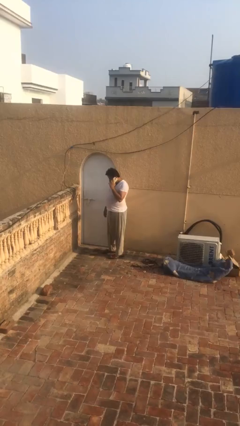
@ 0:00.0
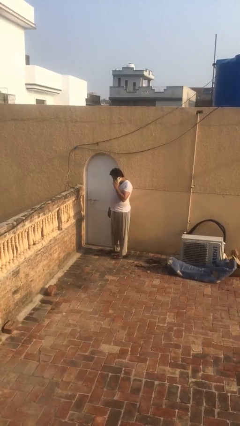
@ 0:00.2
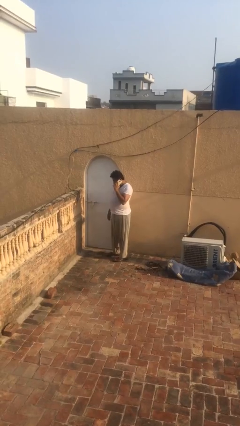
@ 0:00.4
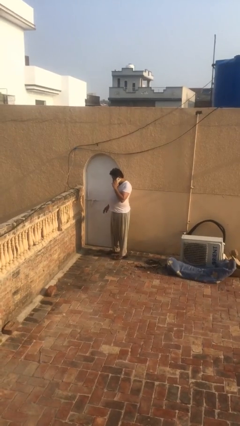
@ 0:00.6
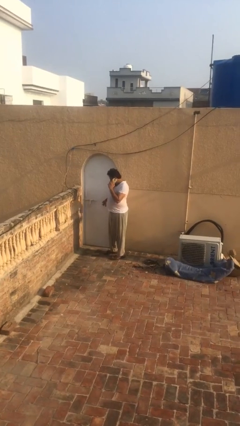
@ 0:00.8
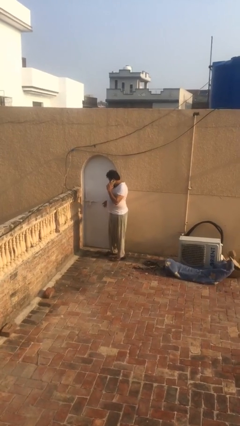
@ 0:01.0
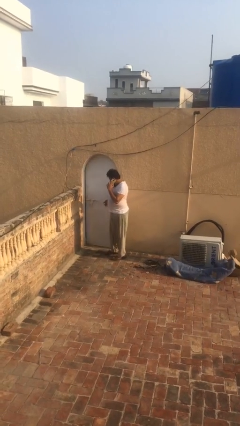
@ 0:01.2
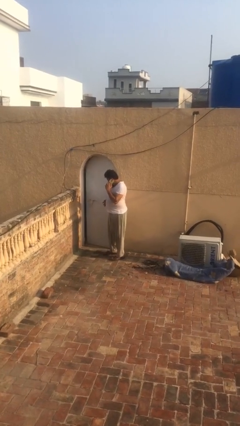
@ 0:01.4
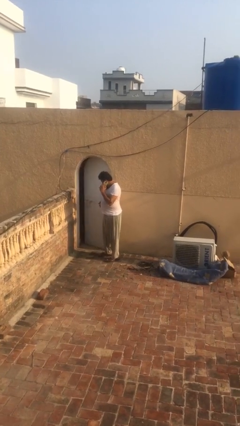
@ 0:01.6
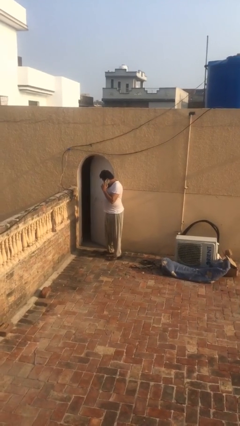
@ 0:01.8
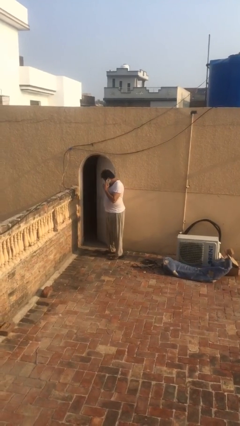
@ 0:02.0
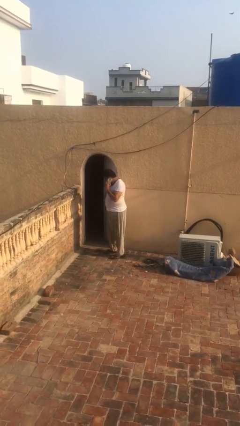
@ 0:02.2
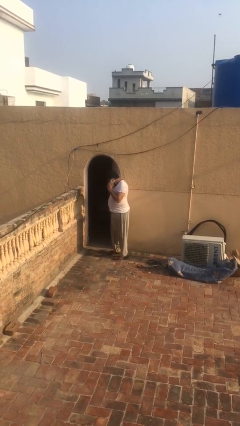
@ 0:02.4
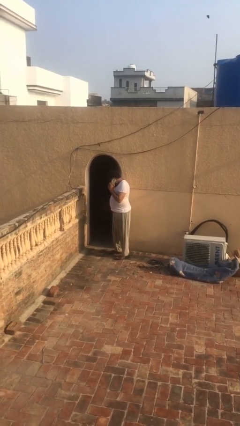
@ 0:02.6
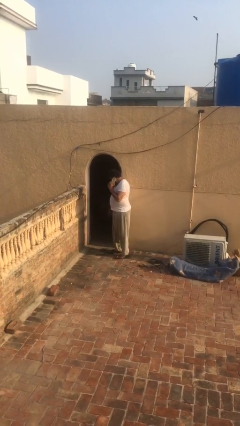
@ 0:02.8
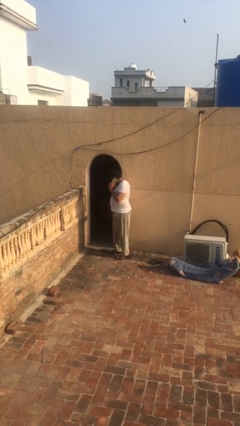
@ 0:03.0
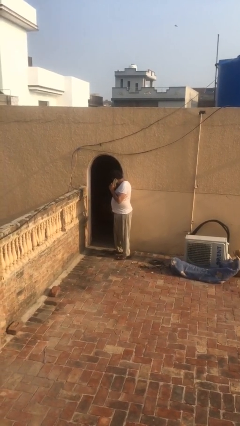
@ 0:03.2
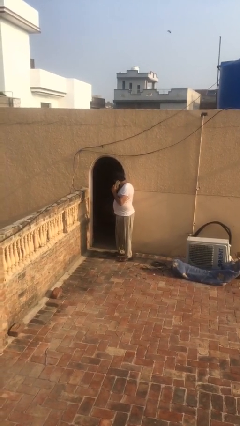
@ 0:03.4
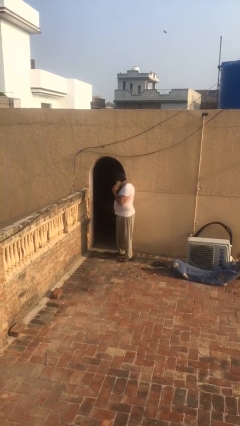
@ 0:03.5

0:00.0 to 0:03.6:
person opens facility door

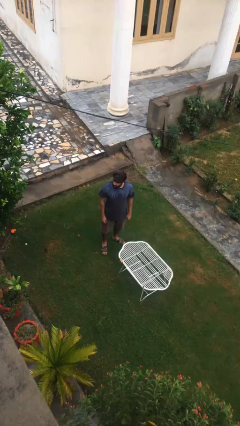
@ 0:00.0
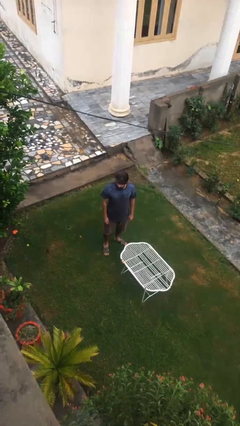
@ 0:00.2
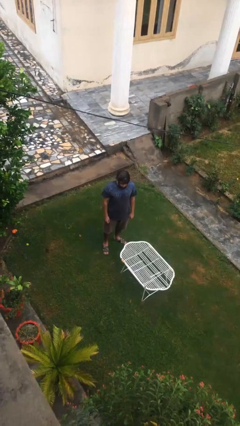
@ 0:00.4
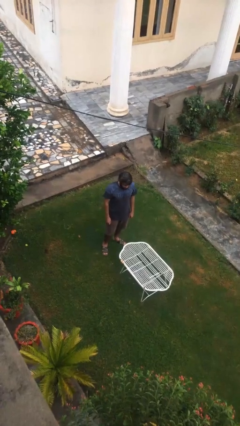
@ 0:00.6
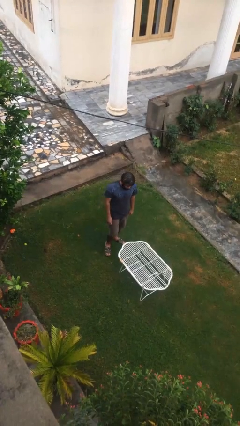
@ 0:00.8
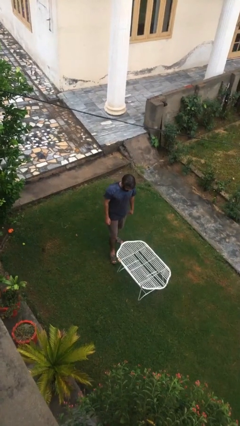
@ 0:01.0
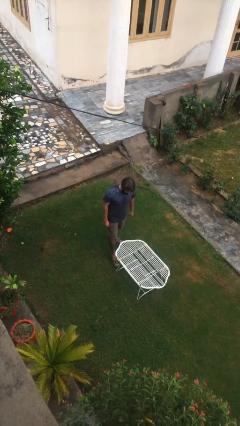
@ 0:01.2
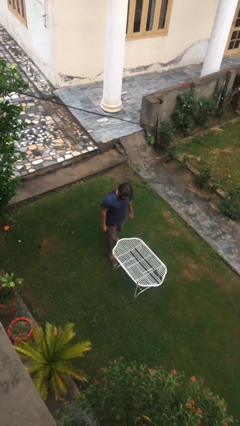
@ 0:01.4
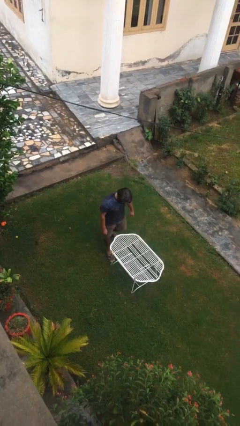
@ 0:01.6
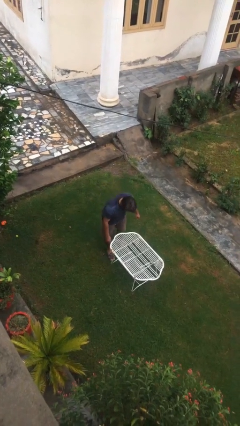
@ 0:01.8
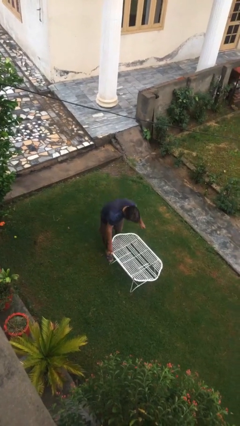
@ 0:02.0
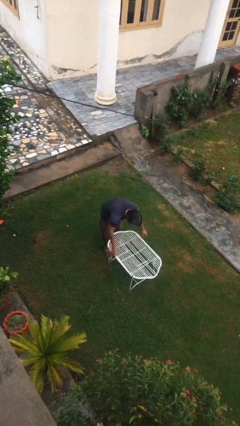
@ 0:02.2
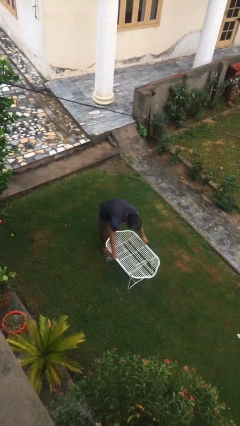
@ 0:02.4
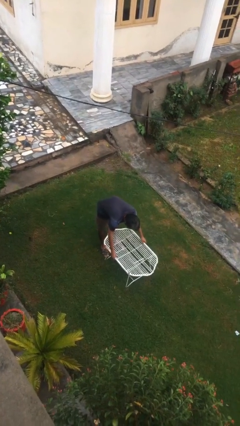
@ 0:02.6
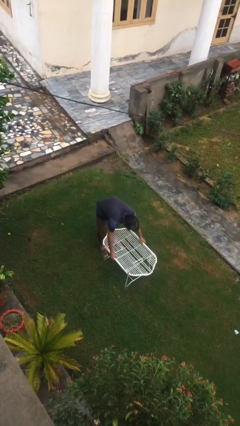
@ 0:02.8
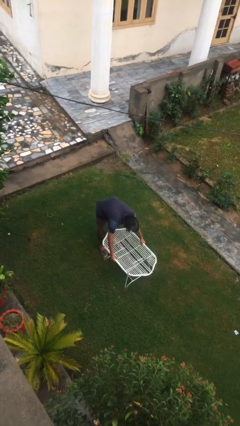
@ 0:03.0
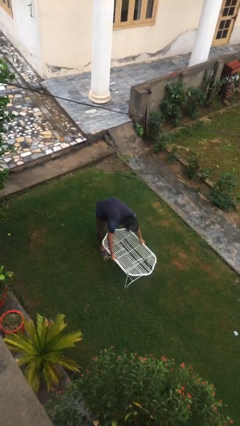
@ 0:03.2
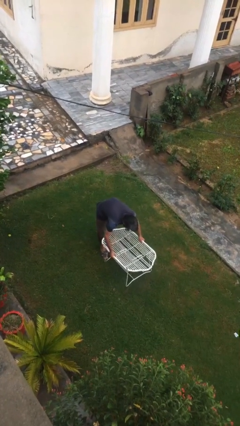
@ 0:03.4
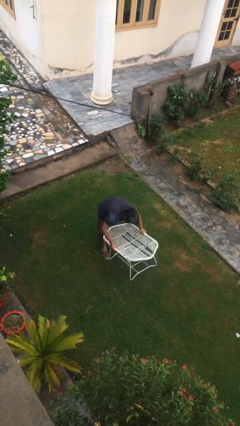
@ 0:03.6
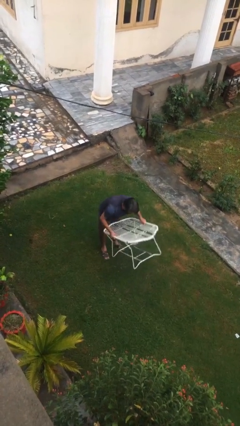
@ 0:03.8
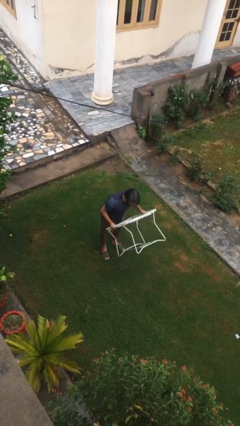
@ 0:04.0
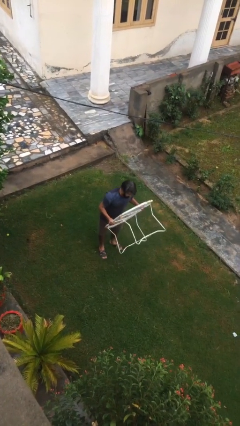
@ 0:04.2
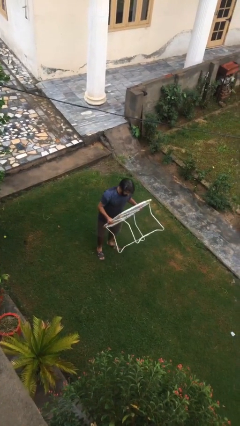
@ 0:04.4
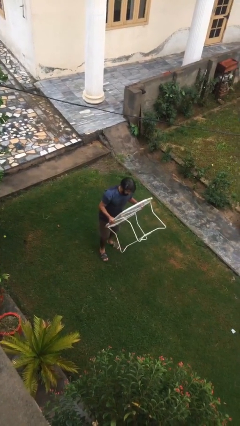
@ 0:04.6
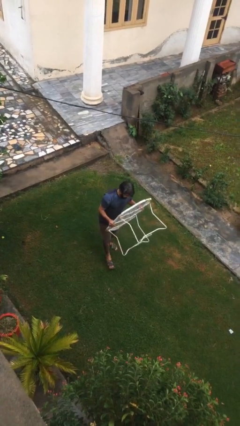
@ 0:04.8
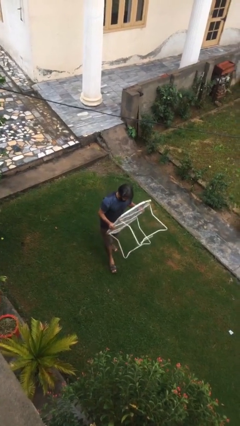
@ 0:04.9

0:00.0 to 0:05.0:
person picks up object from floor

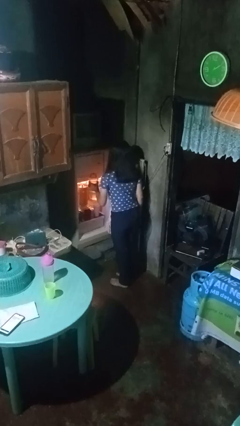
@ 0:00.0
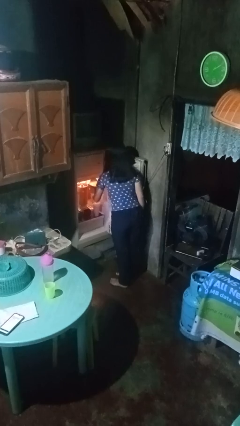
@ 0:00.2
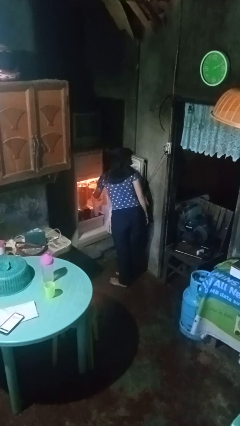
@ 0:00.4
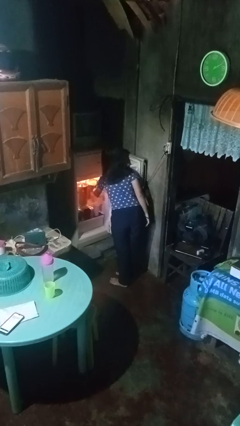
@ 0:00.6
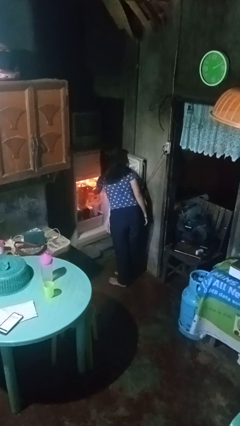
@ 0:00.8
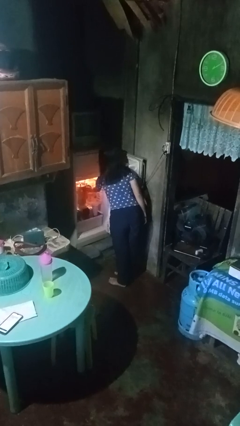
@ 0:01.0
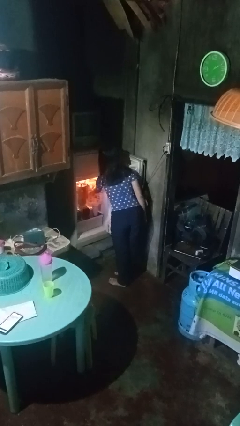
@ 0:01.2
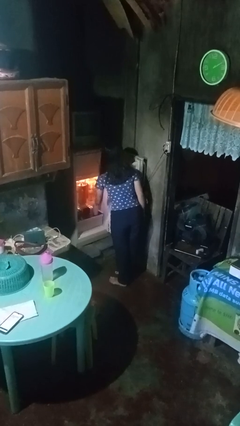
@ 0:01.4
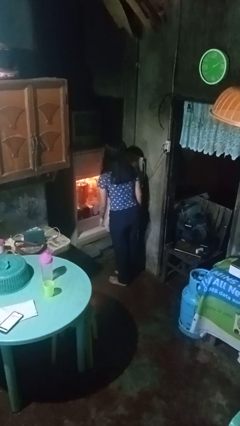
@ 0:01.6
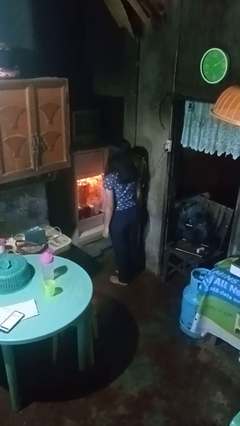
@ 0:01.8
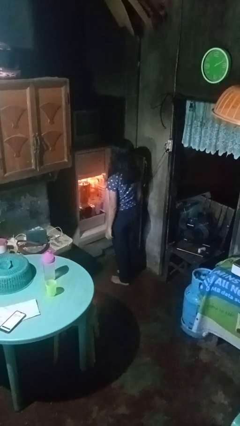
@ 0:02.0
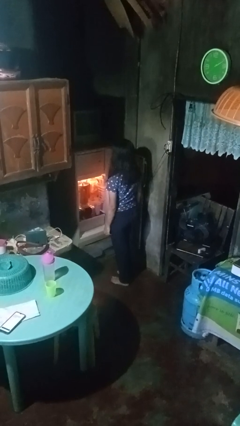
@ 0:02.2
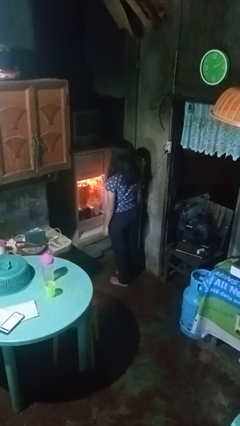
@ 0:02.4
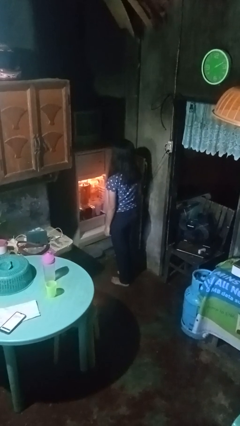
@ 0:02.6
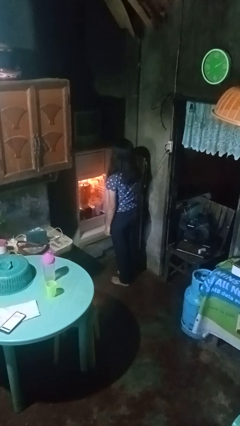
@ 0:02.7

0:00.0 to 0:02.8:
person puts object into refrigerator

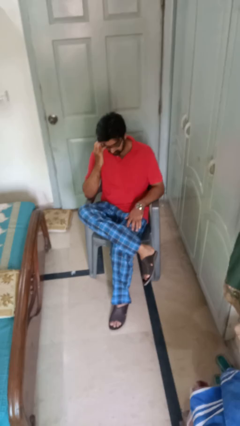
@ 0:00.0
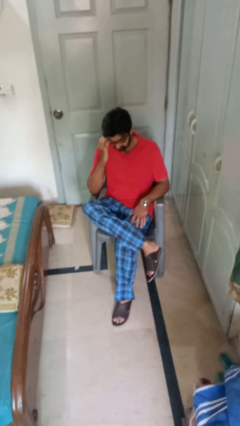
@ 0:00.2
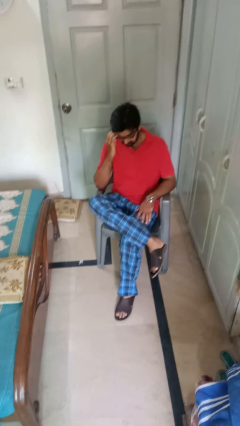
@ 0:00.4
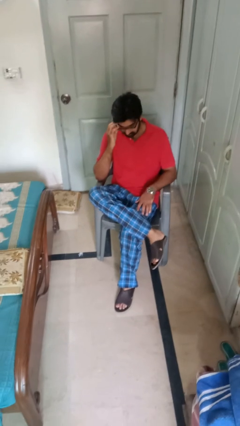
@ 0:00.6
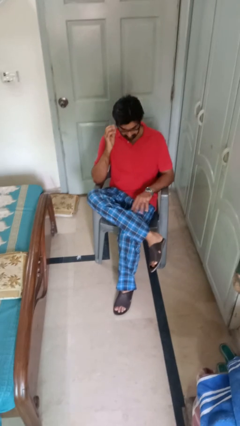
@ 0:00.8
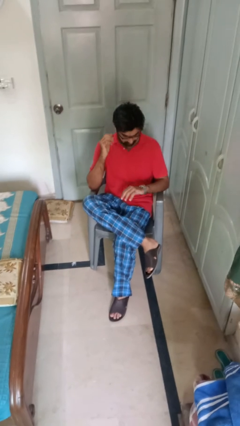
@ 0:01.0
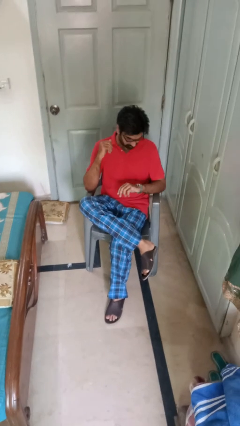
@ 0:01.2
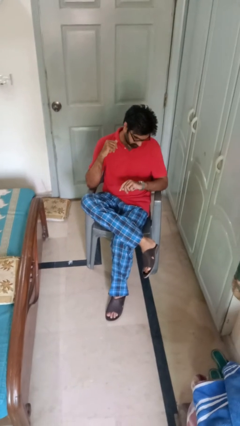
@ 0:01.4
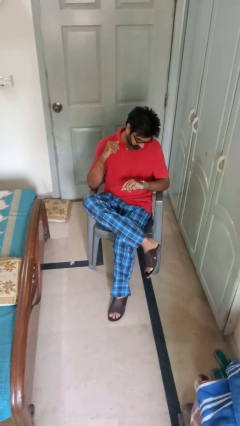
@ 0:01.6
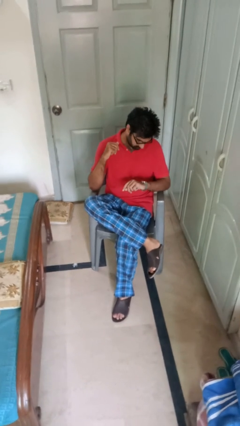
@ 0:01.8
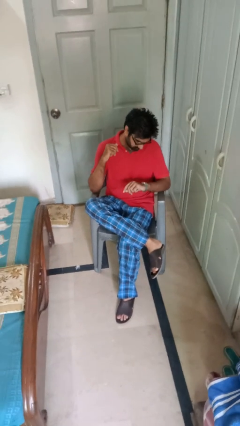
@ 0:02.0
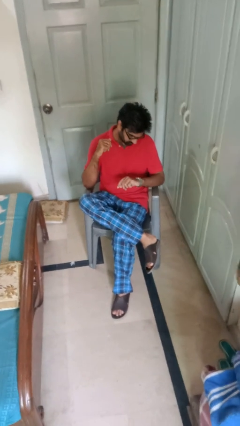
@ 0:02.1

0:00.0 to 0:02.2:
person looks at wristwatch

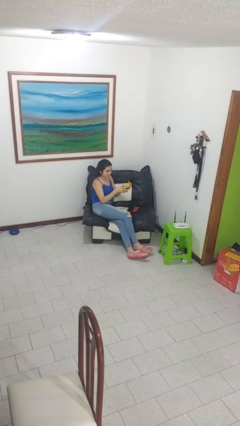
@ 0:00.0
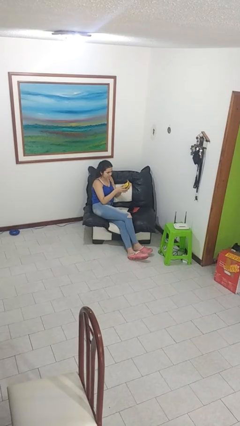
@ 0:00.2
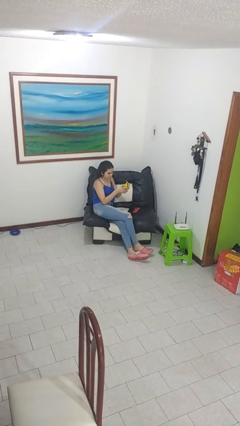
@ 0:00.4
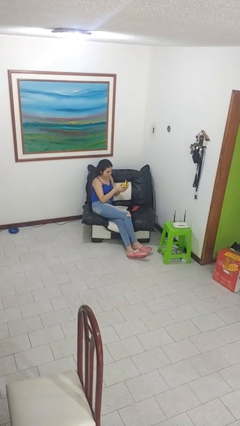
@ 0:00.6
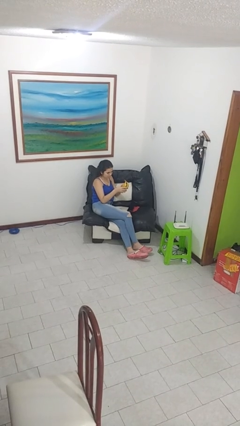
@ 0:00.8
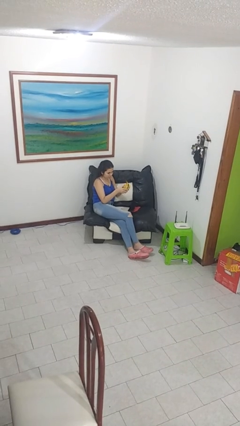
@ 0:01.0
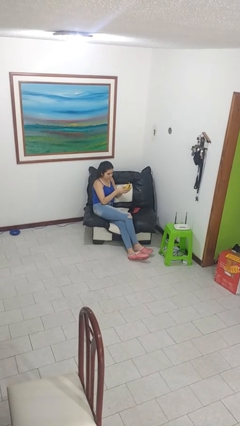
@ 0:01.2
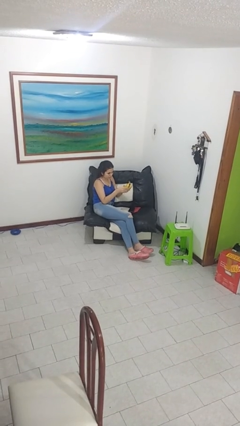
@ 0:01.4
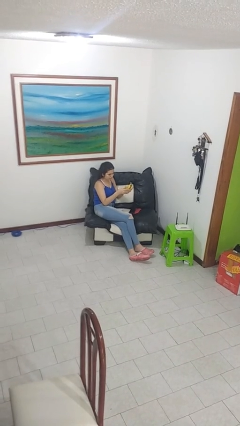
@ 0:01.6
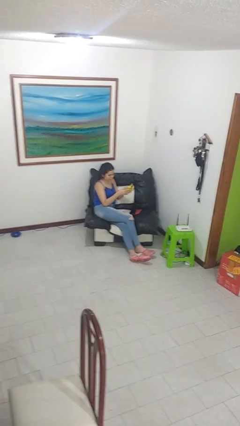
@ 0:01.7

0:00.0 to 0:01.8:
person taps object with finger

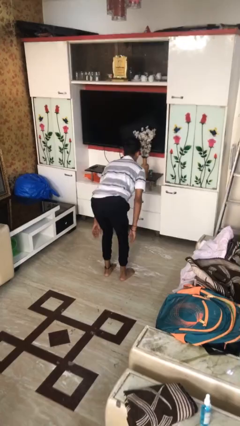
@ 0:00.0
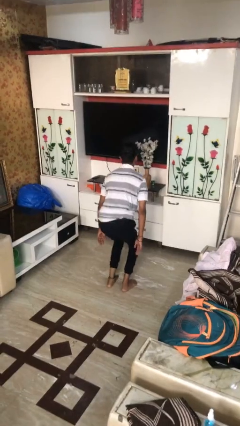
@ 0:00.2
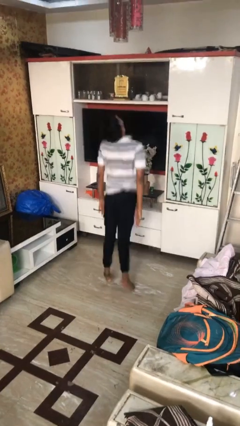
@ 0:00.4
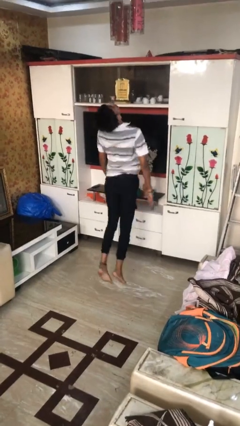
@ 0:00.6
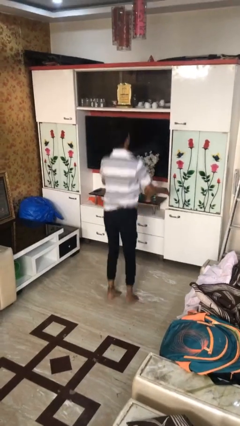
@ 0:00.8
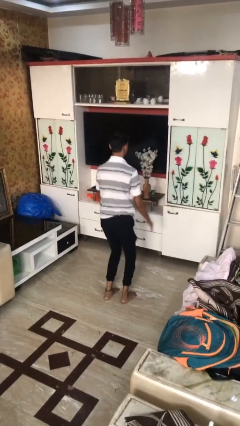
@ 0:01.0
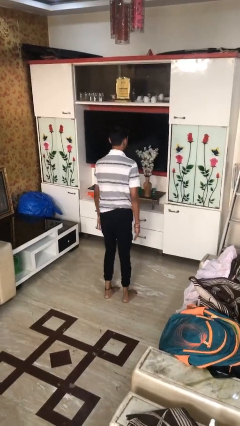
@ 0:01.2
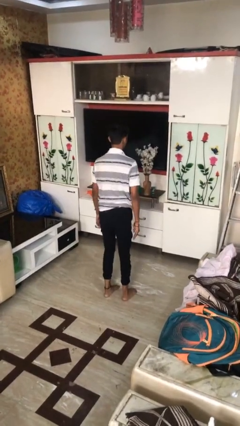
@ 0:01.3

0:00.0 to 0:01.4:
person somersaults

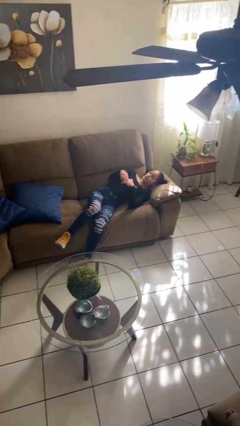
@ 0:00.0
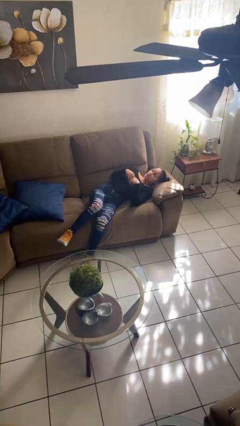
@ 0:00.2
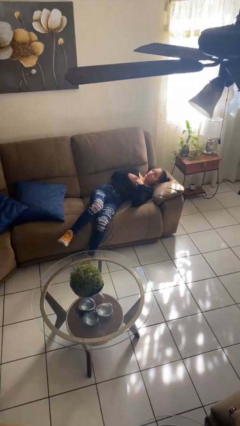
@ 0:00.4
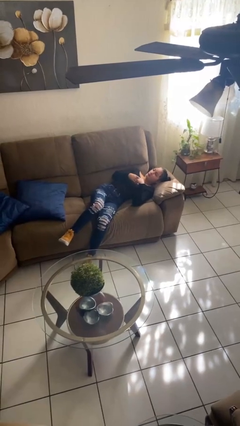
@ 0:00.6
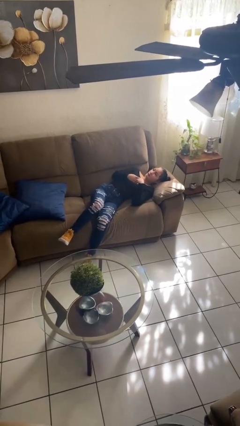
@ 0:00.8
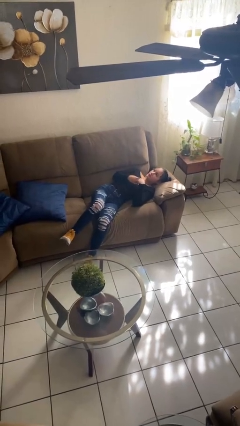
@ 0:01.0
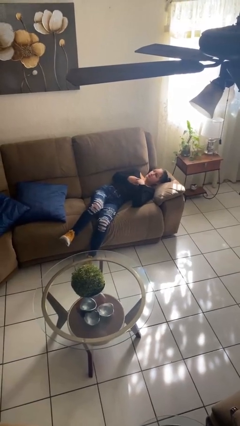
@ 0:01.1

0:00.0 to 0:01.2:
person lies down on bed
